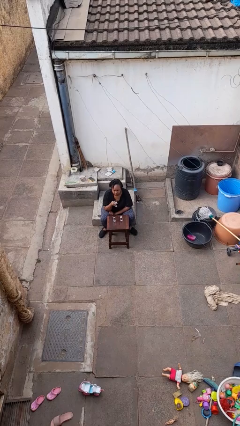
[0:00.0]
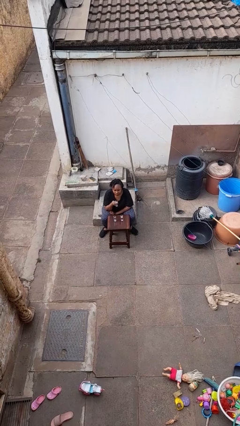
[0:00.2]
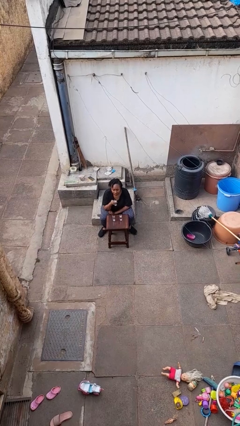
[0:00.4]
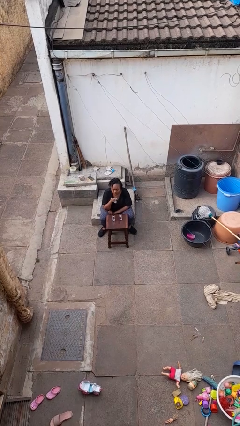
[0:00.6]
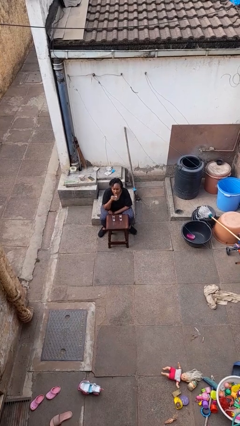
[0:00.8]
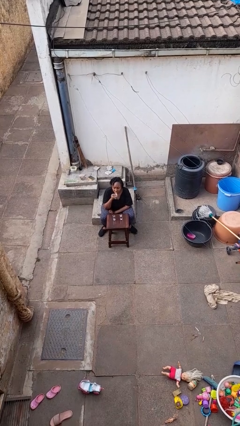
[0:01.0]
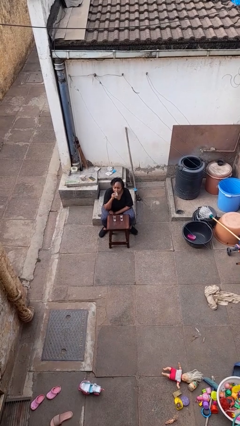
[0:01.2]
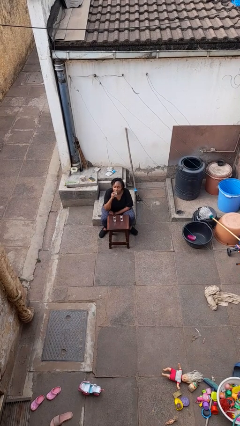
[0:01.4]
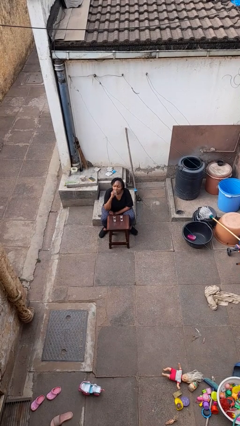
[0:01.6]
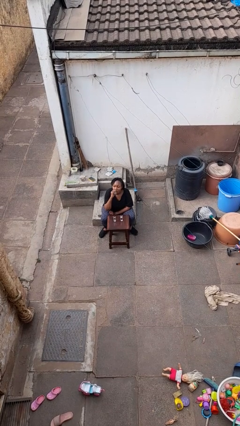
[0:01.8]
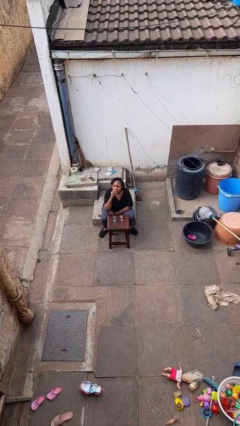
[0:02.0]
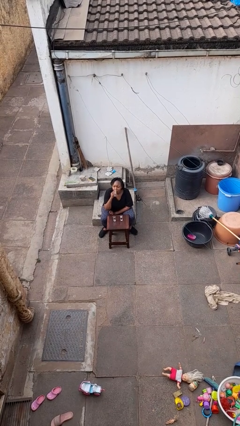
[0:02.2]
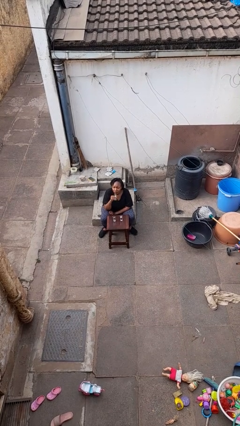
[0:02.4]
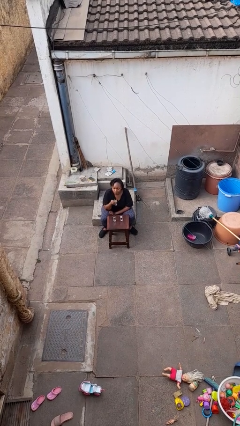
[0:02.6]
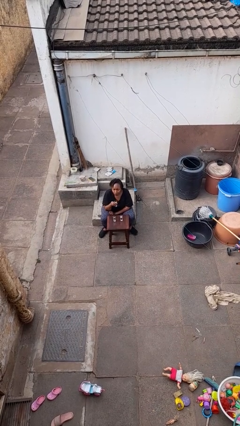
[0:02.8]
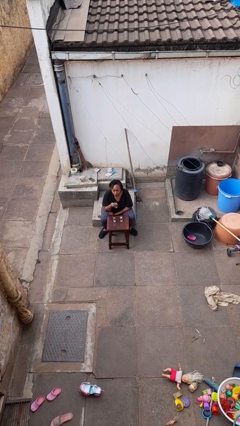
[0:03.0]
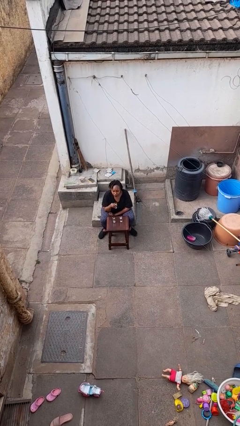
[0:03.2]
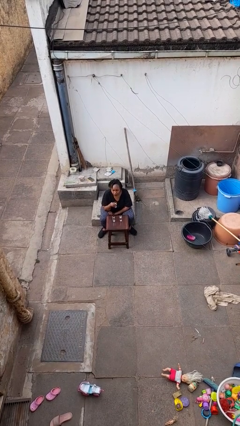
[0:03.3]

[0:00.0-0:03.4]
person drinks from shotglass

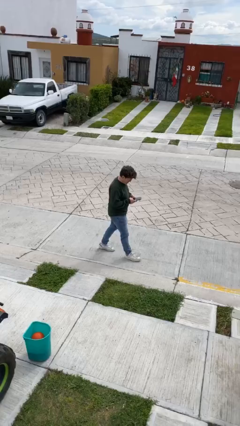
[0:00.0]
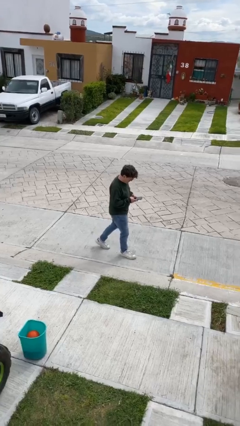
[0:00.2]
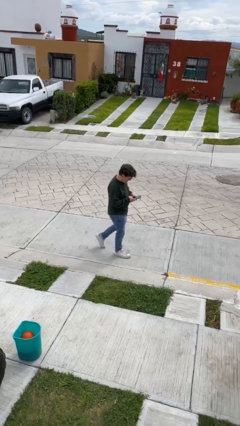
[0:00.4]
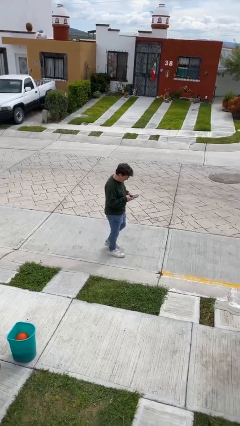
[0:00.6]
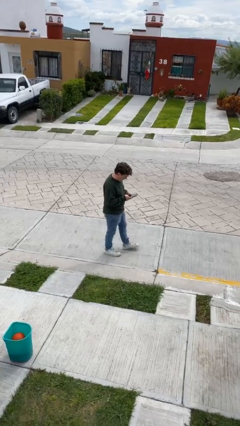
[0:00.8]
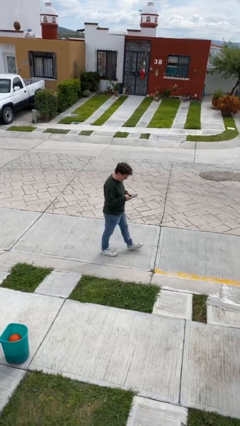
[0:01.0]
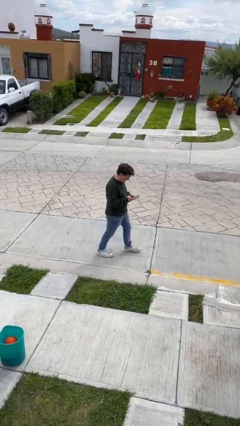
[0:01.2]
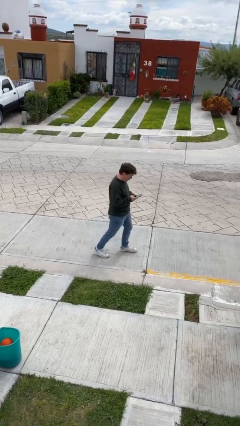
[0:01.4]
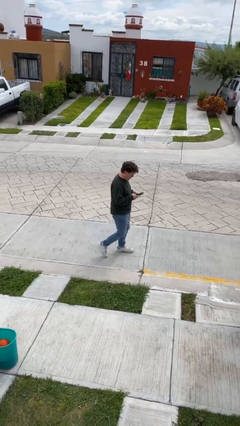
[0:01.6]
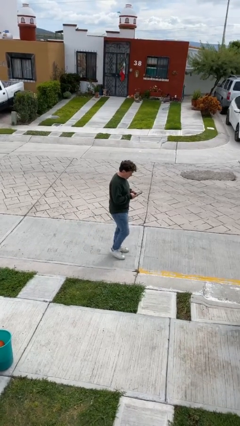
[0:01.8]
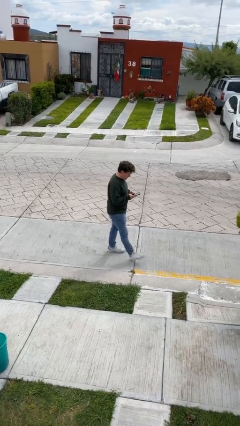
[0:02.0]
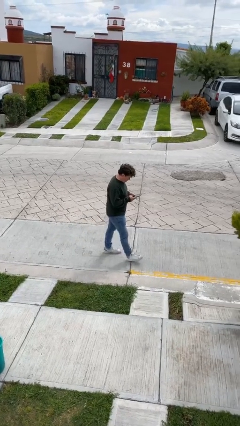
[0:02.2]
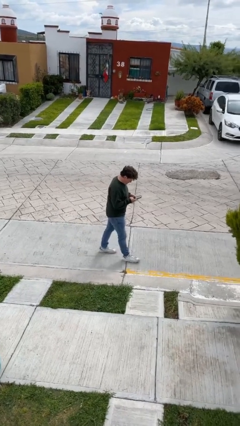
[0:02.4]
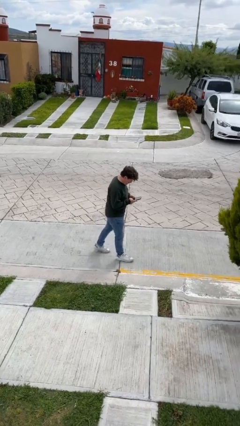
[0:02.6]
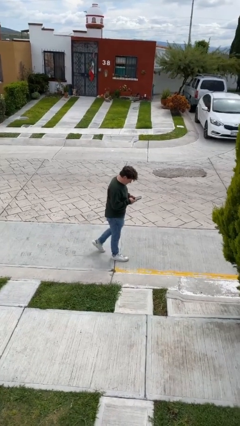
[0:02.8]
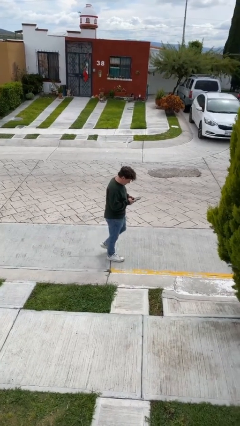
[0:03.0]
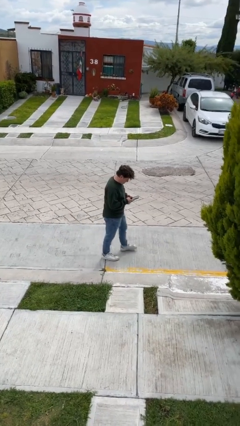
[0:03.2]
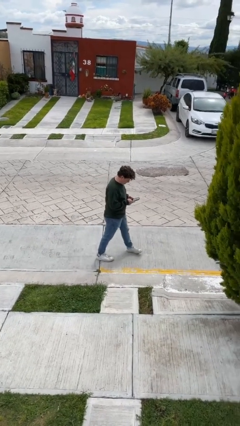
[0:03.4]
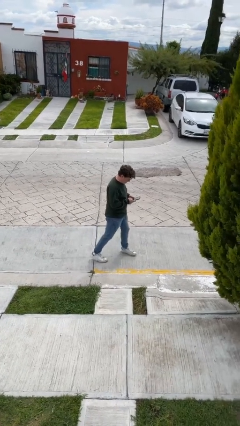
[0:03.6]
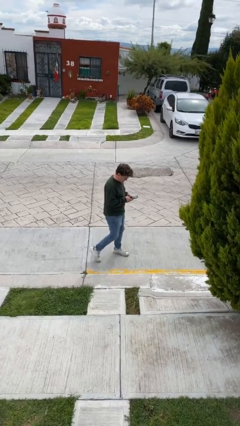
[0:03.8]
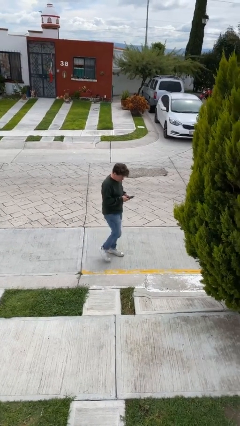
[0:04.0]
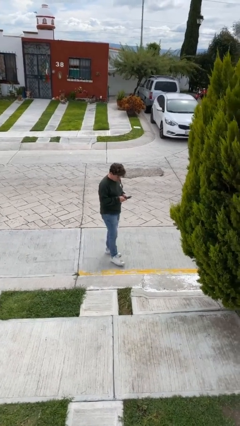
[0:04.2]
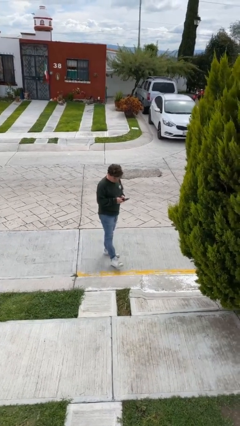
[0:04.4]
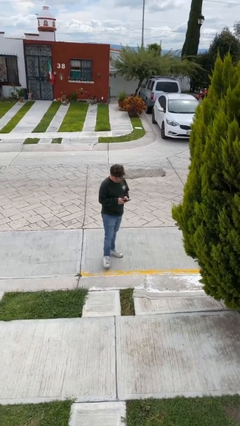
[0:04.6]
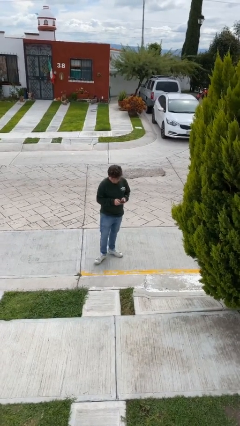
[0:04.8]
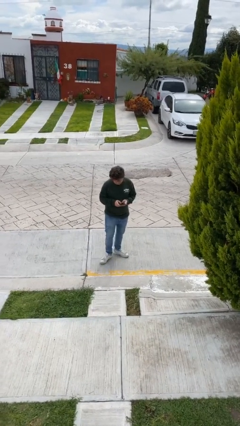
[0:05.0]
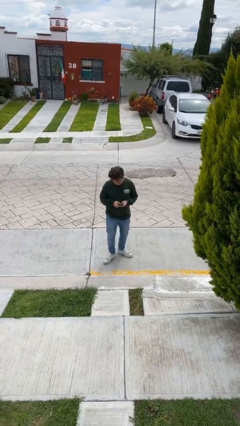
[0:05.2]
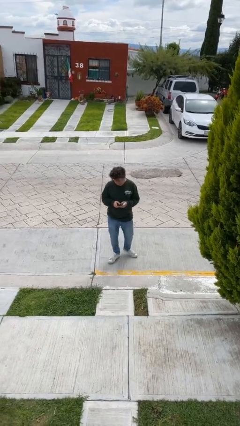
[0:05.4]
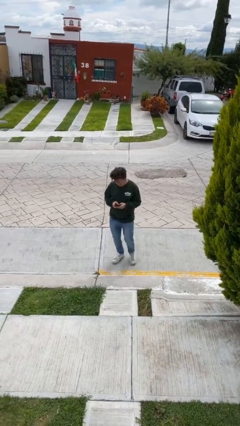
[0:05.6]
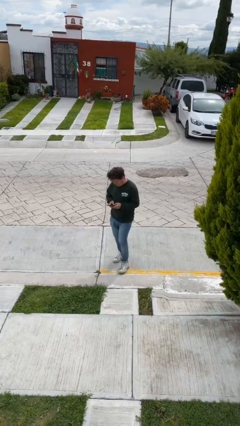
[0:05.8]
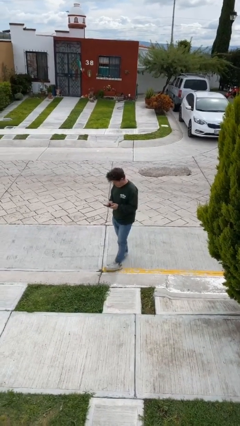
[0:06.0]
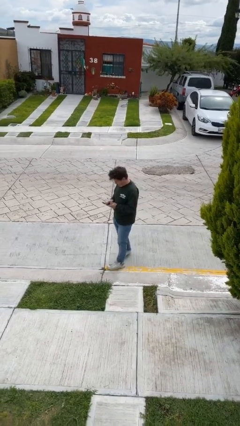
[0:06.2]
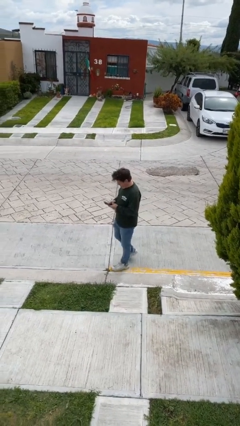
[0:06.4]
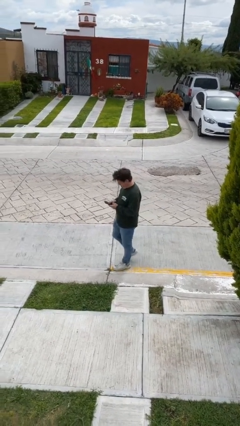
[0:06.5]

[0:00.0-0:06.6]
person texts on phone

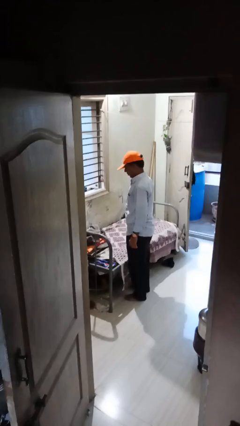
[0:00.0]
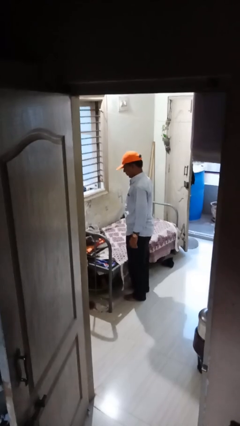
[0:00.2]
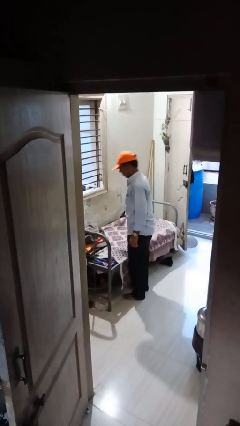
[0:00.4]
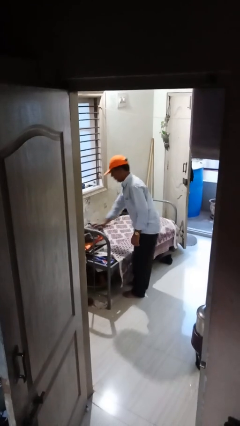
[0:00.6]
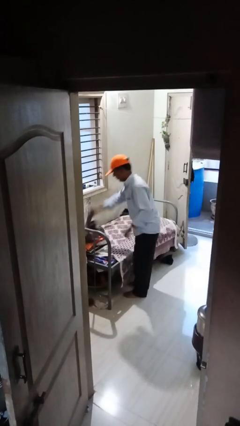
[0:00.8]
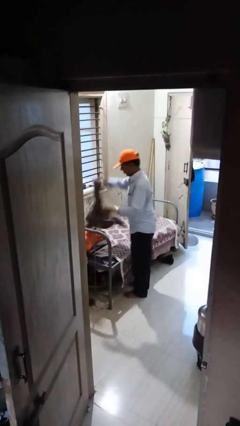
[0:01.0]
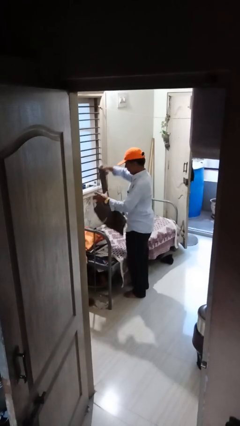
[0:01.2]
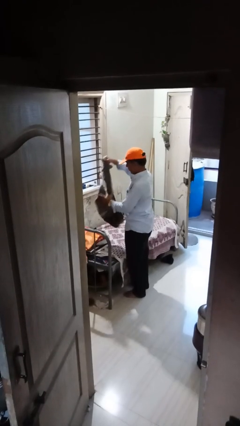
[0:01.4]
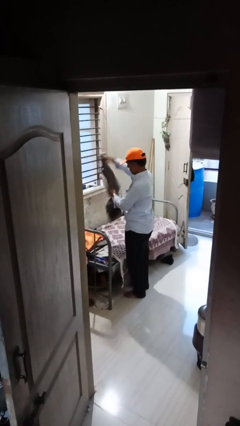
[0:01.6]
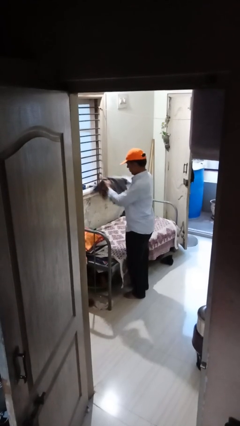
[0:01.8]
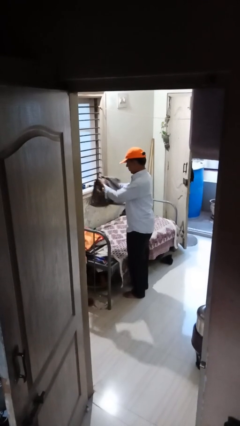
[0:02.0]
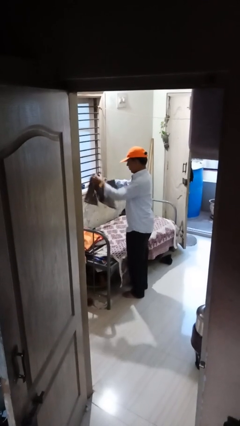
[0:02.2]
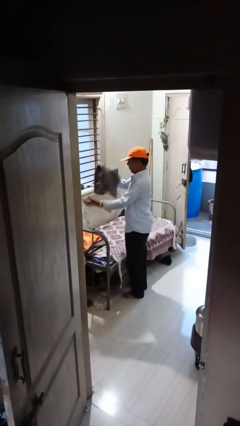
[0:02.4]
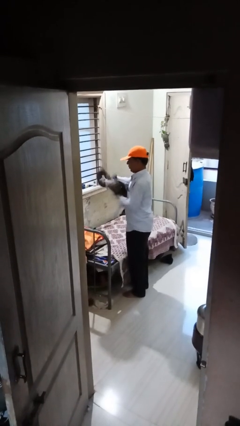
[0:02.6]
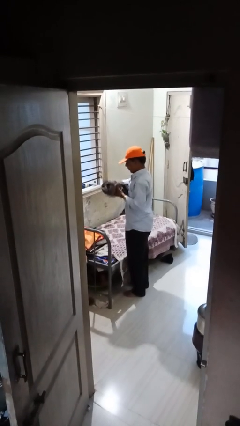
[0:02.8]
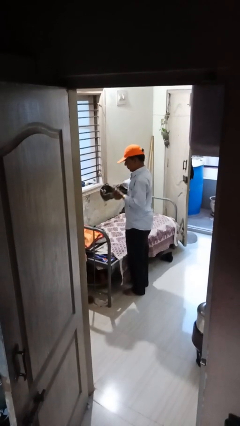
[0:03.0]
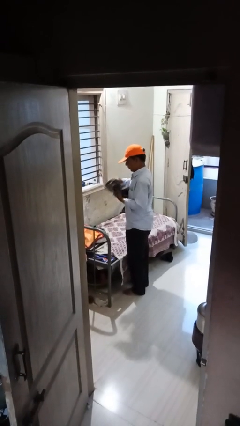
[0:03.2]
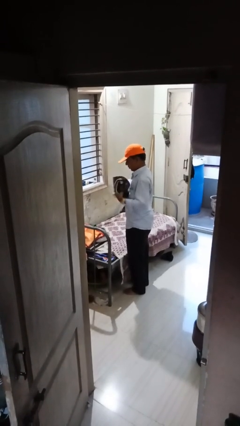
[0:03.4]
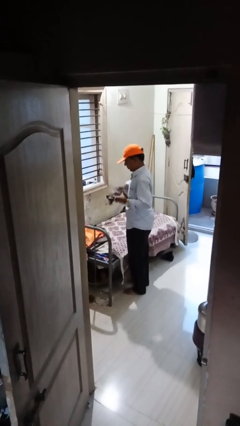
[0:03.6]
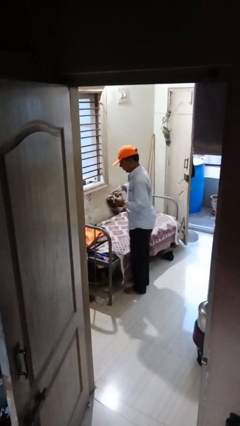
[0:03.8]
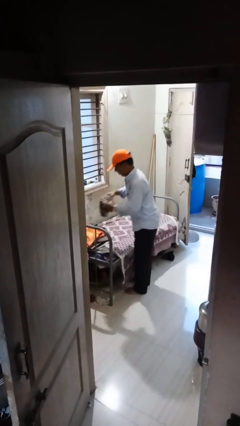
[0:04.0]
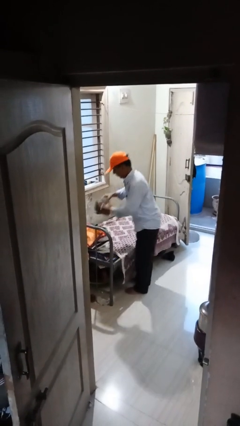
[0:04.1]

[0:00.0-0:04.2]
person folds pants

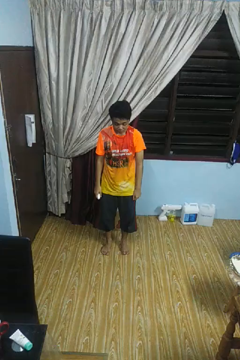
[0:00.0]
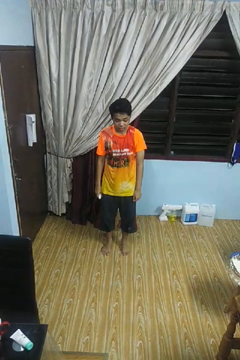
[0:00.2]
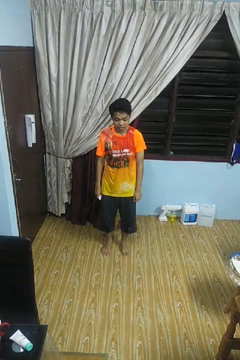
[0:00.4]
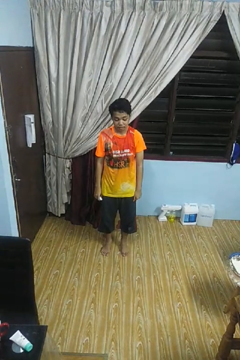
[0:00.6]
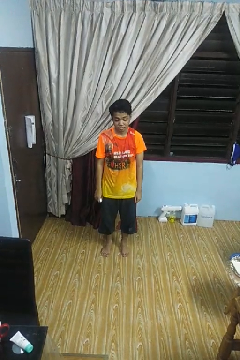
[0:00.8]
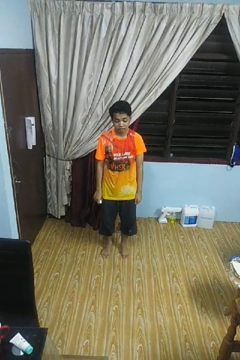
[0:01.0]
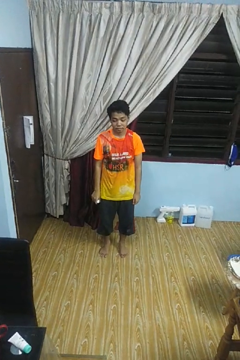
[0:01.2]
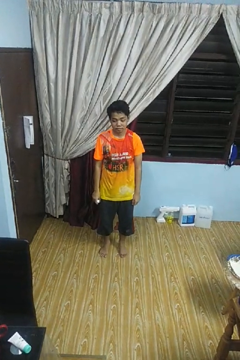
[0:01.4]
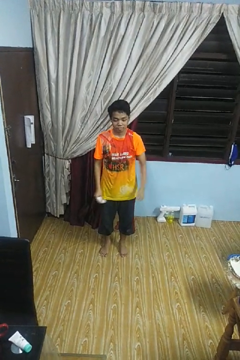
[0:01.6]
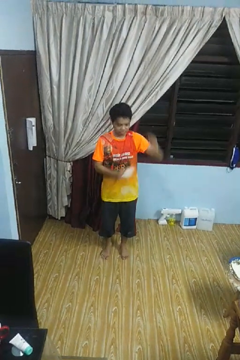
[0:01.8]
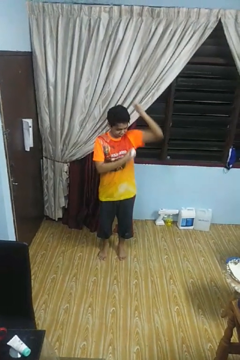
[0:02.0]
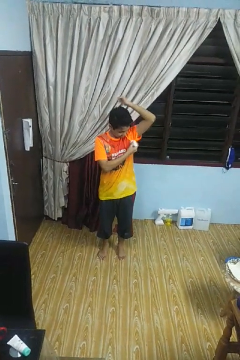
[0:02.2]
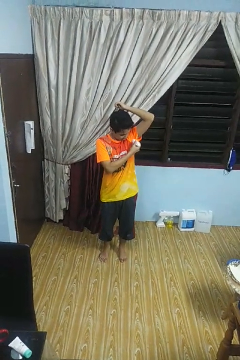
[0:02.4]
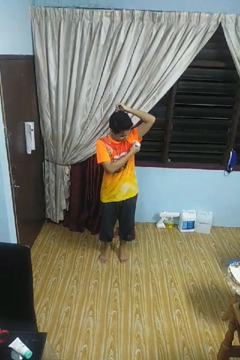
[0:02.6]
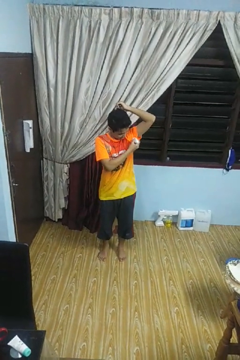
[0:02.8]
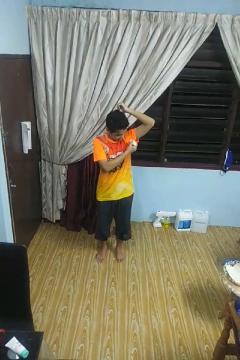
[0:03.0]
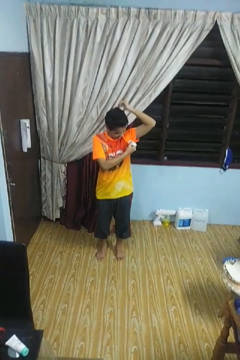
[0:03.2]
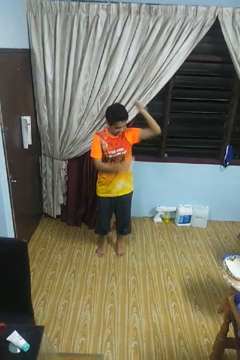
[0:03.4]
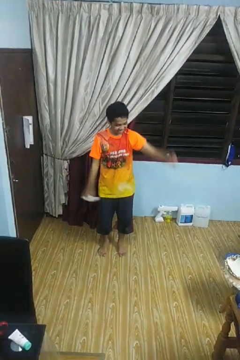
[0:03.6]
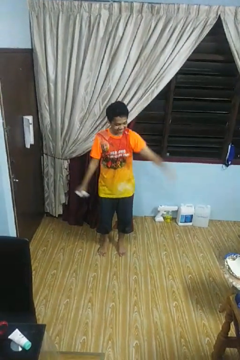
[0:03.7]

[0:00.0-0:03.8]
person applies deodorant

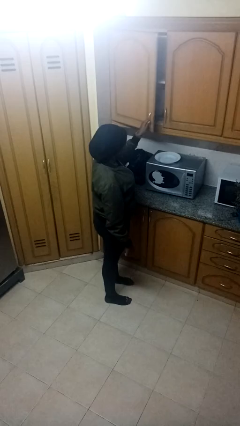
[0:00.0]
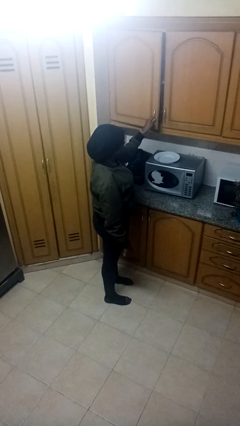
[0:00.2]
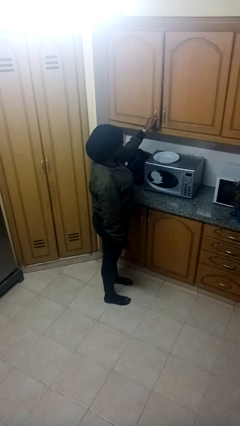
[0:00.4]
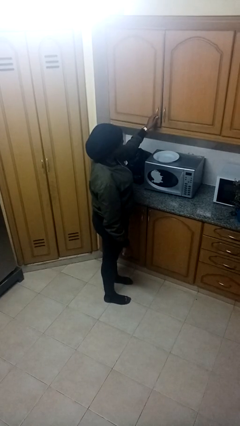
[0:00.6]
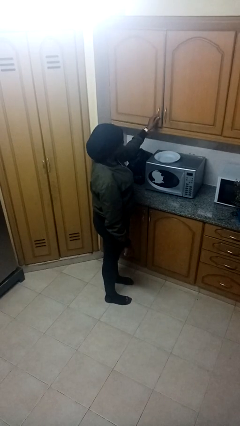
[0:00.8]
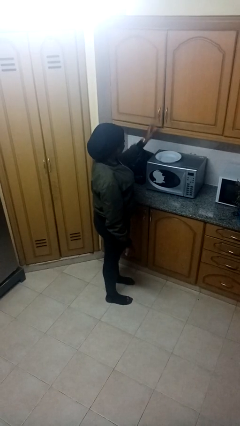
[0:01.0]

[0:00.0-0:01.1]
person closes cabinet
